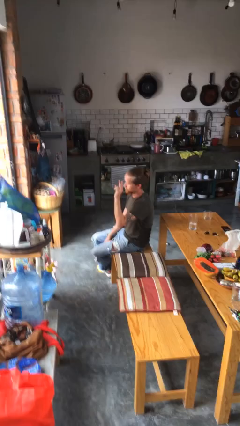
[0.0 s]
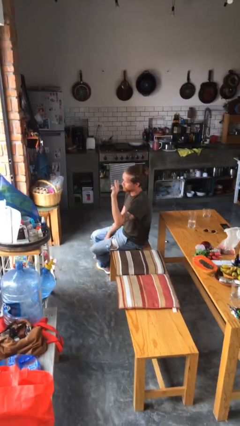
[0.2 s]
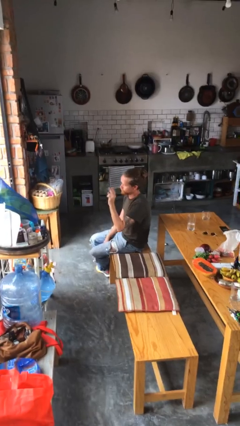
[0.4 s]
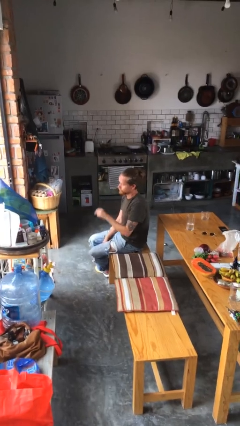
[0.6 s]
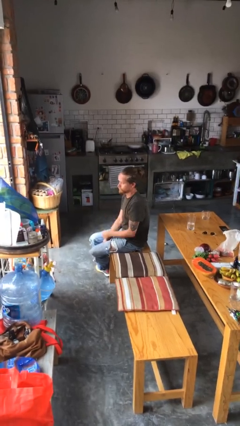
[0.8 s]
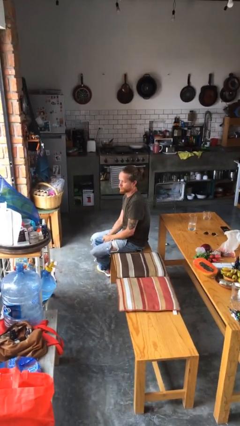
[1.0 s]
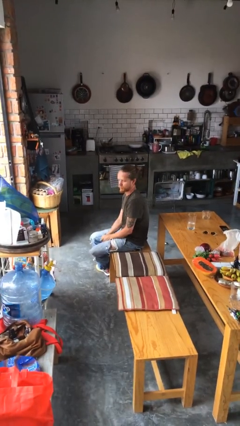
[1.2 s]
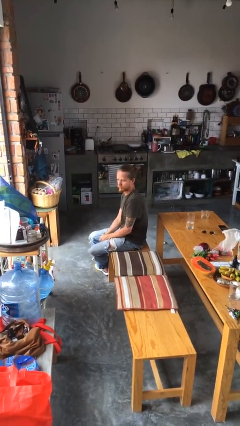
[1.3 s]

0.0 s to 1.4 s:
person gestures lower hand

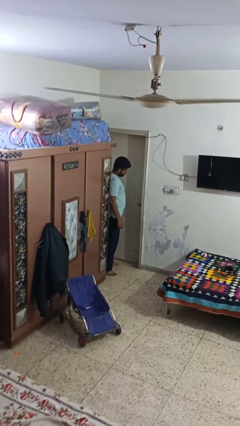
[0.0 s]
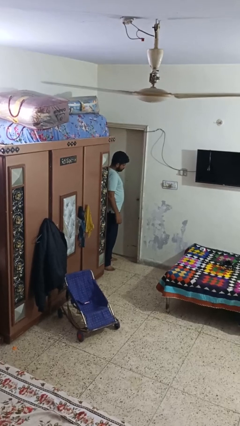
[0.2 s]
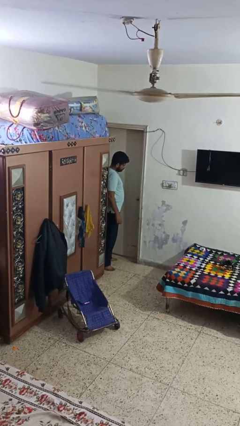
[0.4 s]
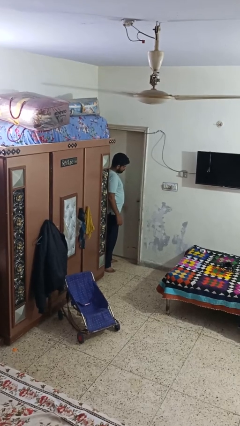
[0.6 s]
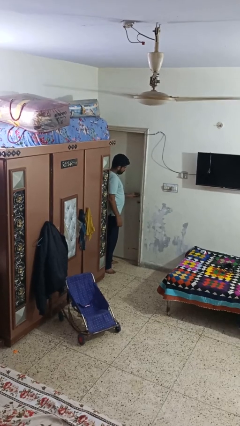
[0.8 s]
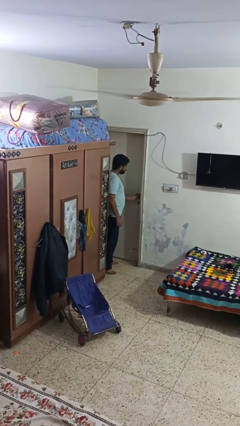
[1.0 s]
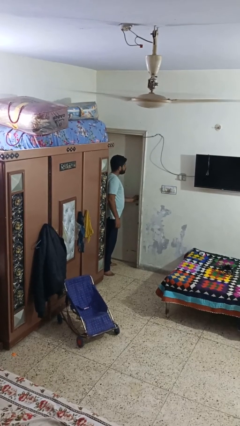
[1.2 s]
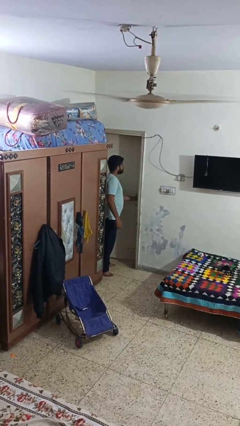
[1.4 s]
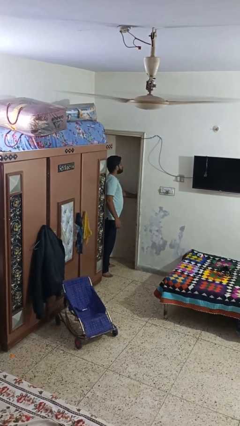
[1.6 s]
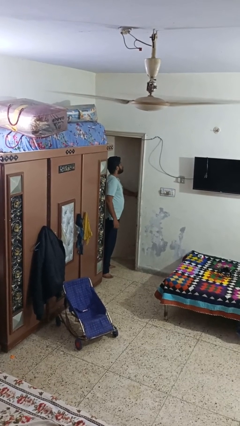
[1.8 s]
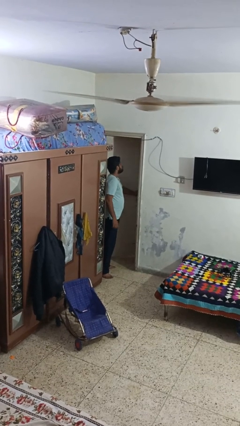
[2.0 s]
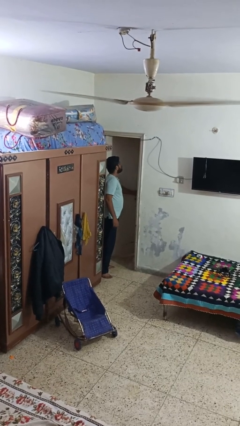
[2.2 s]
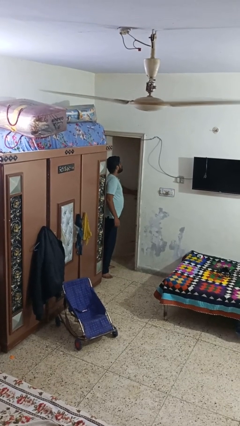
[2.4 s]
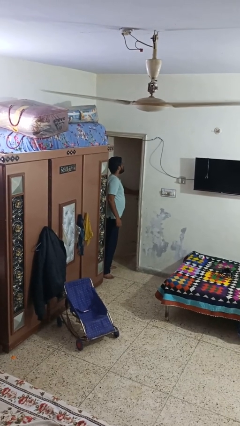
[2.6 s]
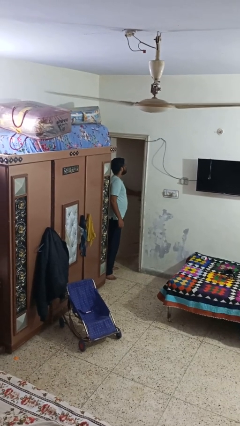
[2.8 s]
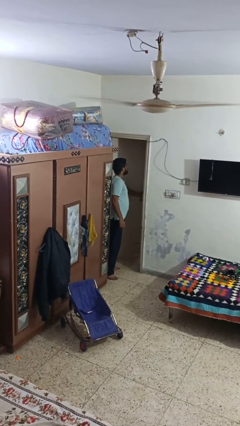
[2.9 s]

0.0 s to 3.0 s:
person opens facility door

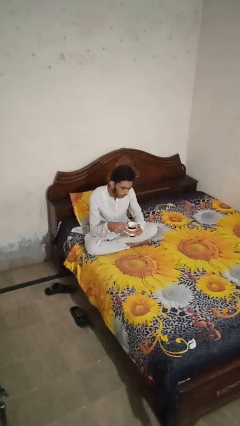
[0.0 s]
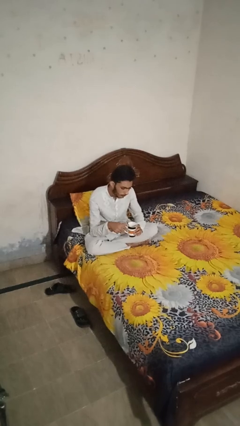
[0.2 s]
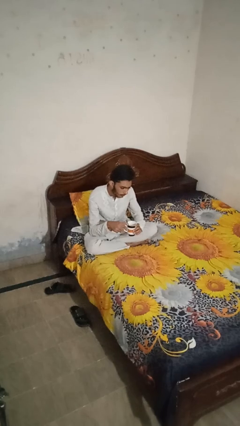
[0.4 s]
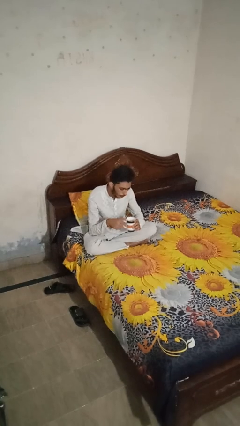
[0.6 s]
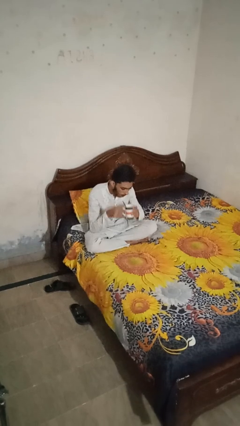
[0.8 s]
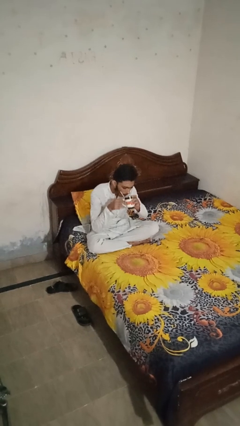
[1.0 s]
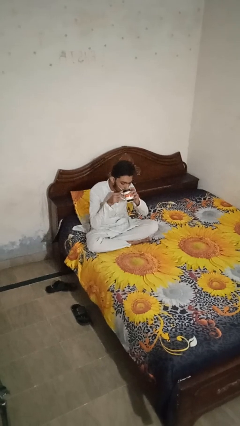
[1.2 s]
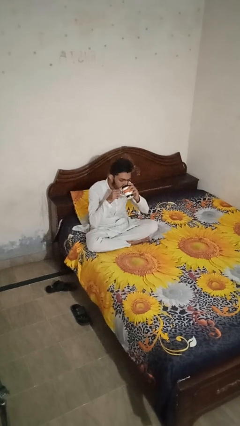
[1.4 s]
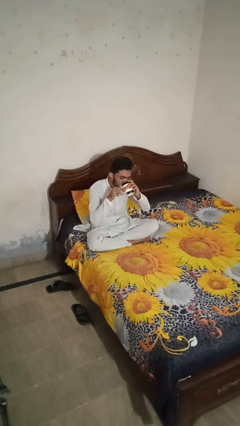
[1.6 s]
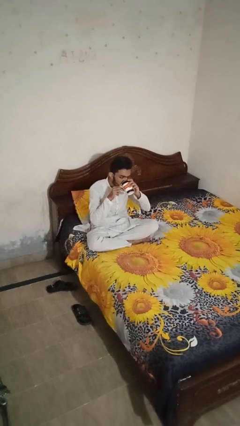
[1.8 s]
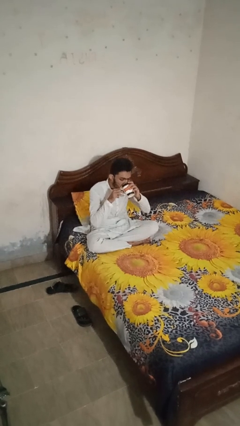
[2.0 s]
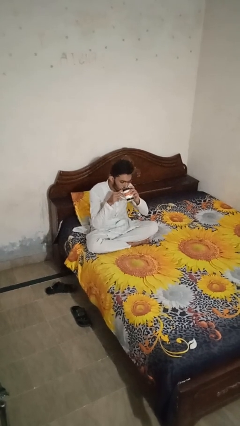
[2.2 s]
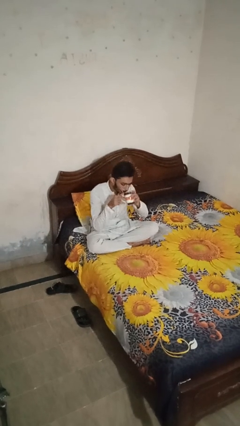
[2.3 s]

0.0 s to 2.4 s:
person drinks from mug

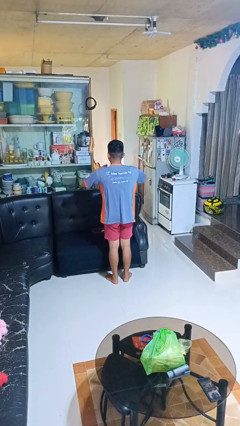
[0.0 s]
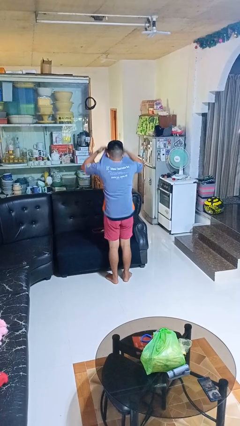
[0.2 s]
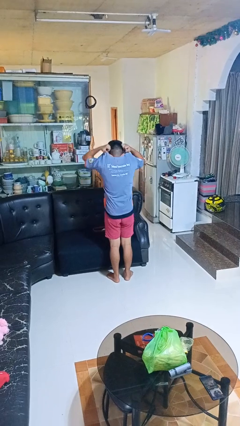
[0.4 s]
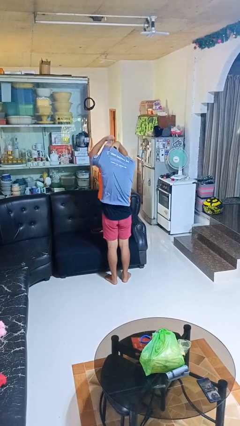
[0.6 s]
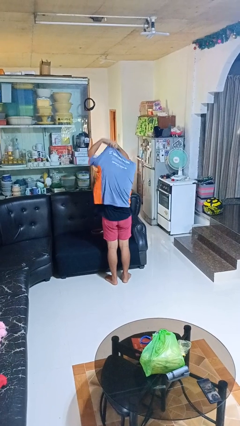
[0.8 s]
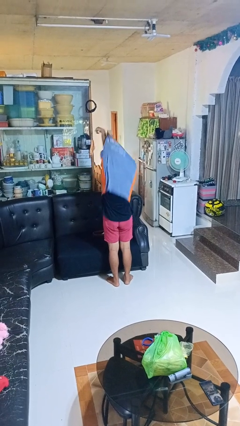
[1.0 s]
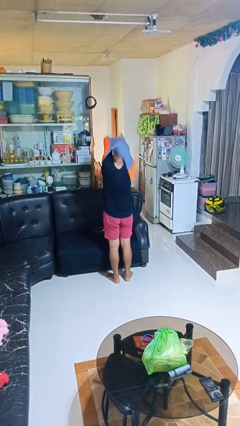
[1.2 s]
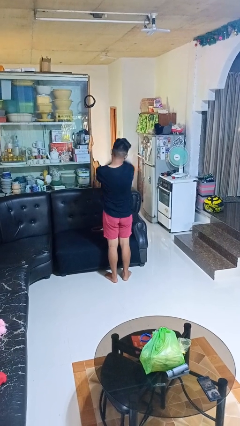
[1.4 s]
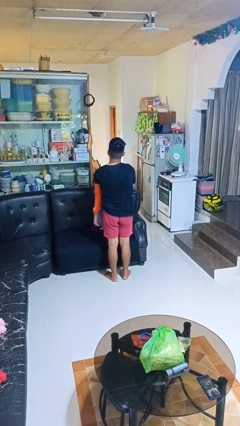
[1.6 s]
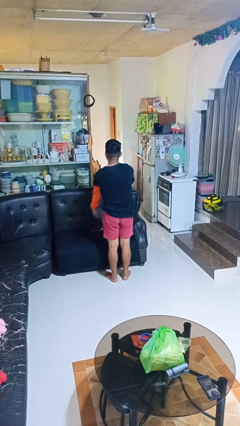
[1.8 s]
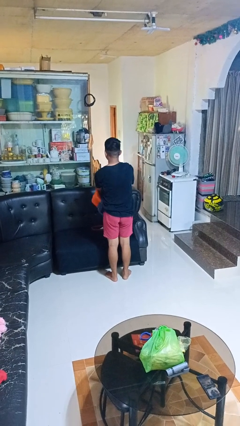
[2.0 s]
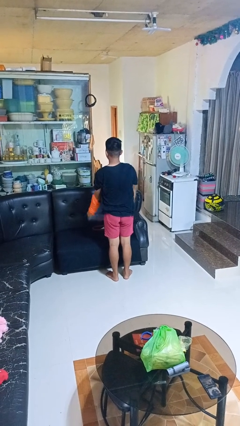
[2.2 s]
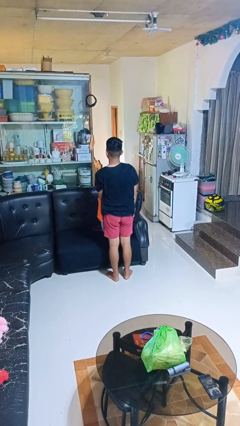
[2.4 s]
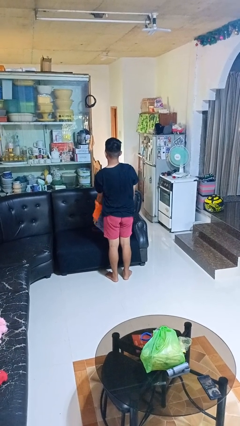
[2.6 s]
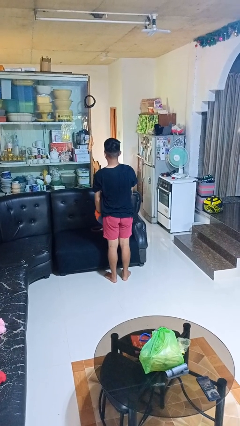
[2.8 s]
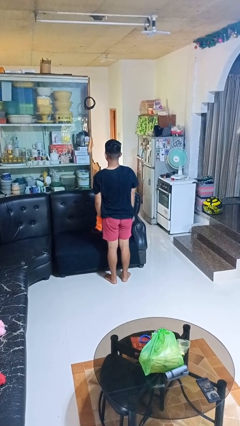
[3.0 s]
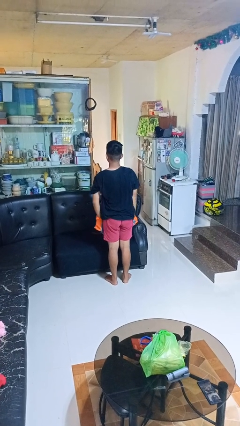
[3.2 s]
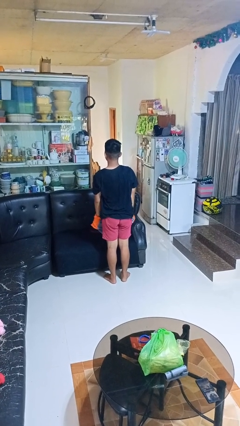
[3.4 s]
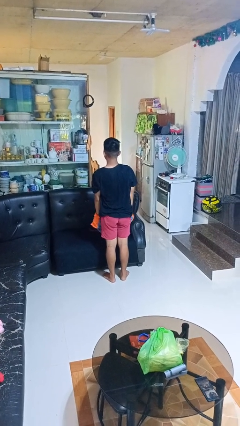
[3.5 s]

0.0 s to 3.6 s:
person takes off shirt

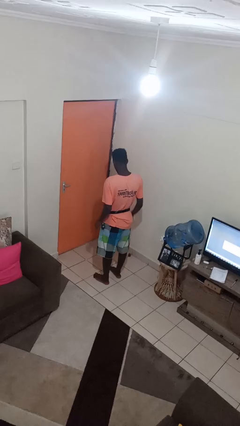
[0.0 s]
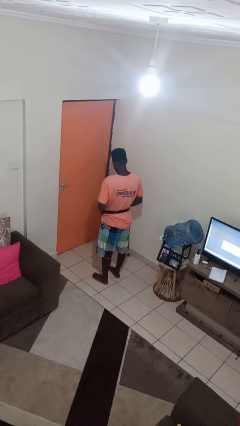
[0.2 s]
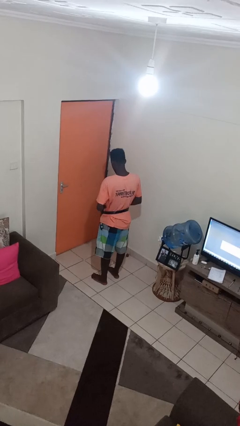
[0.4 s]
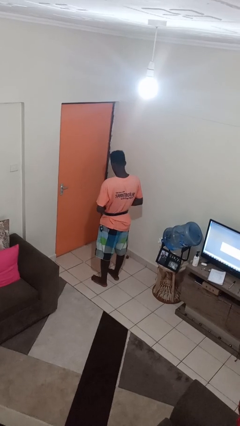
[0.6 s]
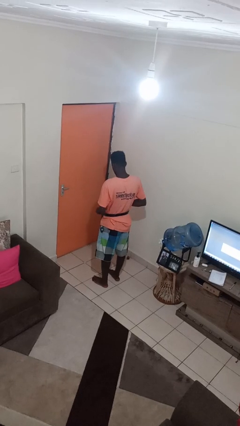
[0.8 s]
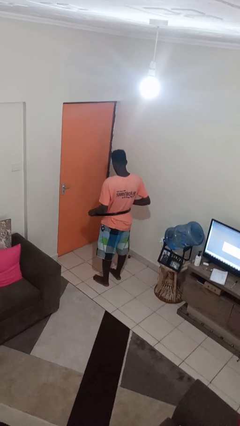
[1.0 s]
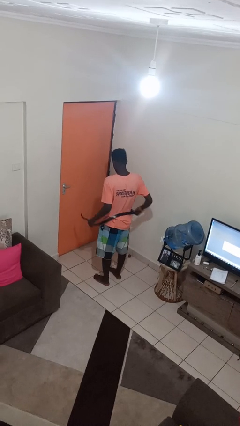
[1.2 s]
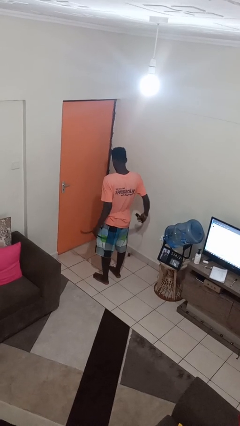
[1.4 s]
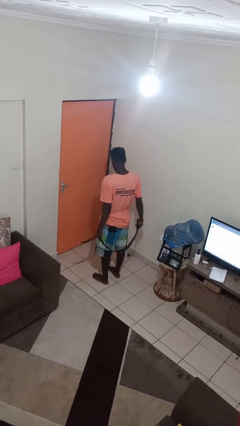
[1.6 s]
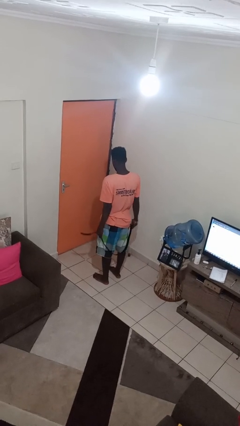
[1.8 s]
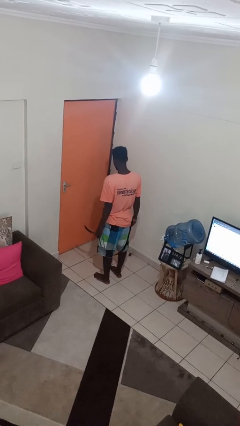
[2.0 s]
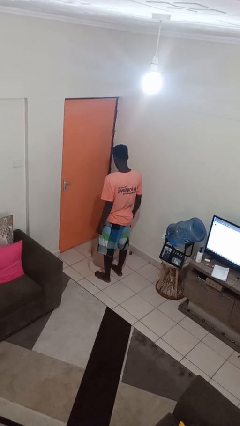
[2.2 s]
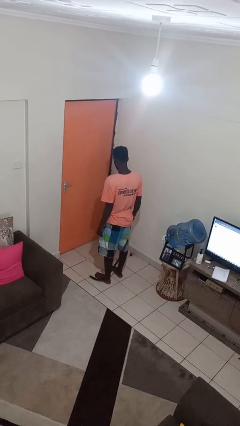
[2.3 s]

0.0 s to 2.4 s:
person takes off belt

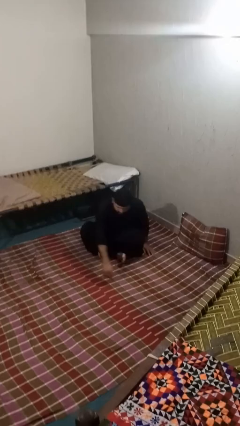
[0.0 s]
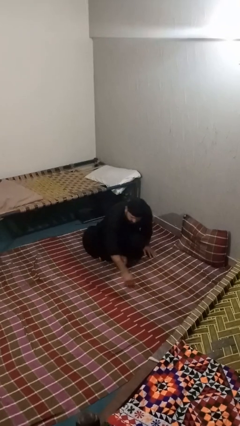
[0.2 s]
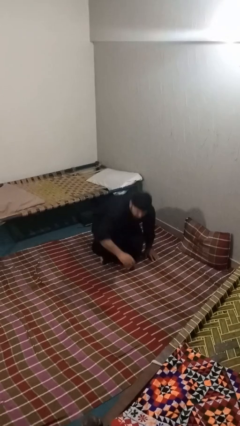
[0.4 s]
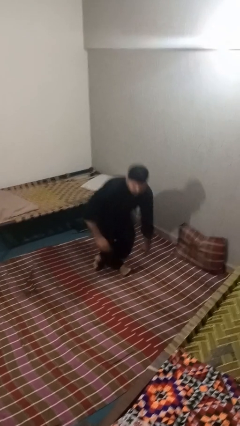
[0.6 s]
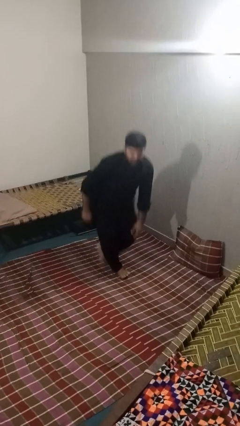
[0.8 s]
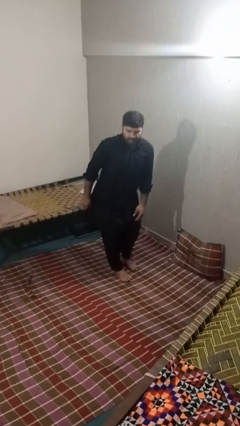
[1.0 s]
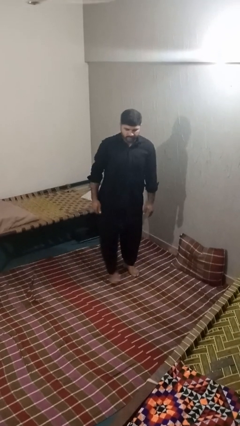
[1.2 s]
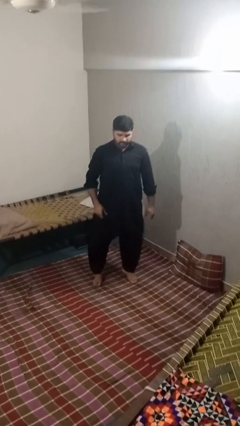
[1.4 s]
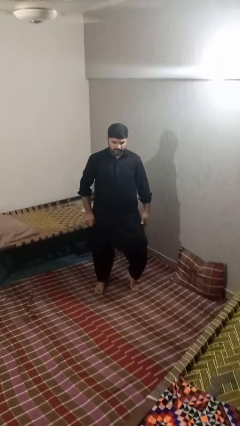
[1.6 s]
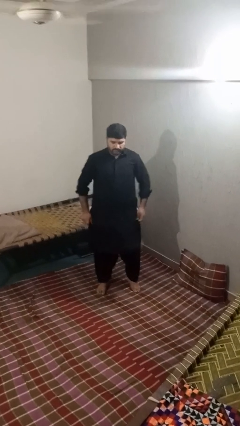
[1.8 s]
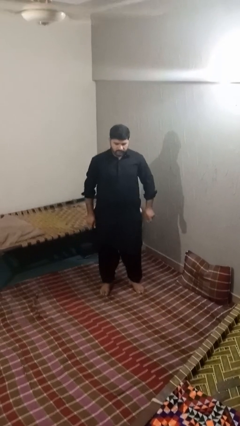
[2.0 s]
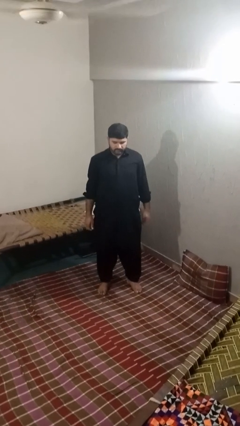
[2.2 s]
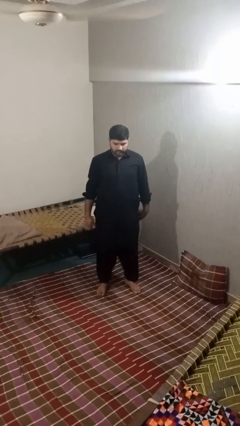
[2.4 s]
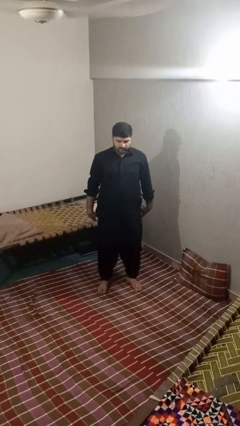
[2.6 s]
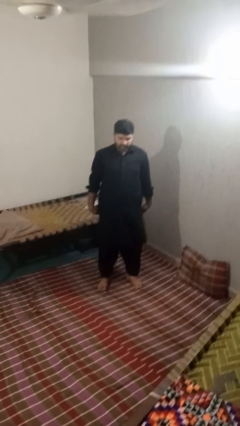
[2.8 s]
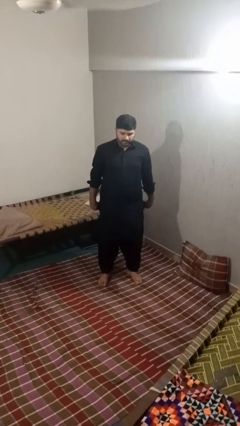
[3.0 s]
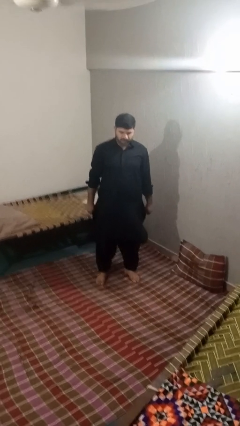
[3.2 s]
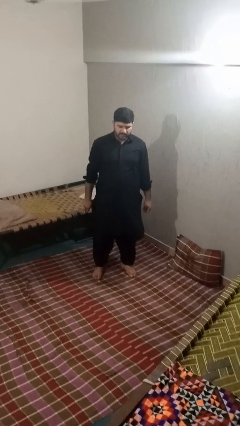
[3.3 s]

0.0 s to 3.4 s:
person stands up from floor

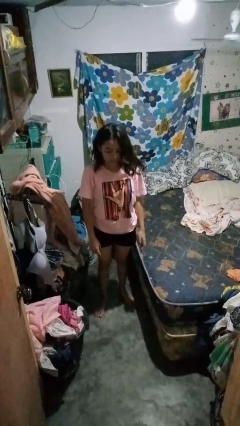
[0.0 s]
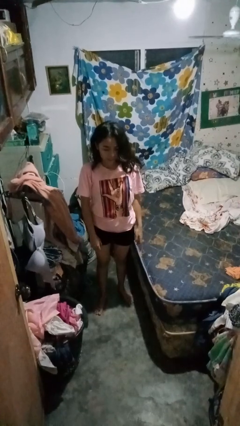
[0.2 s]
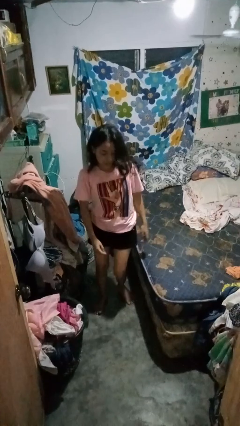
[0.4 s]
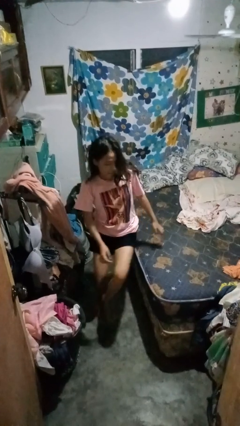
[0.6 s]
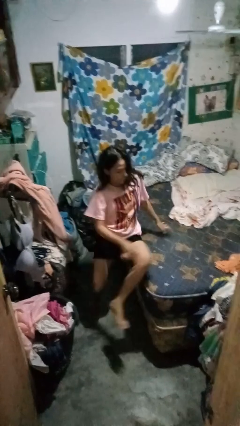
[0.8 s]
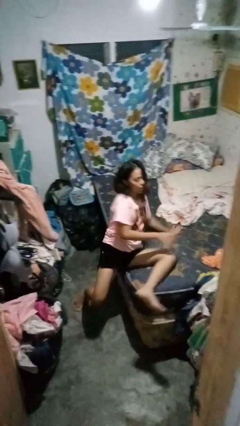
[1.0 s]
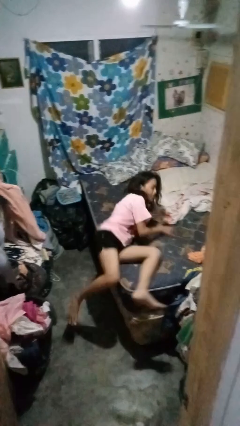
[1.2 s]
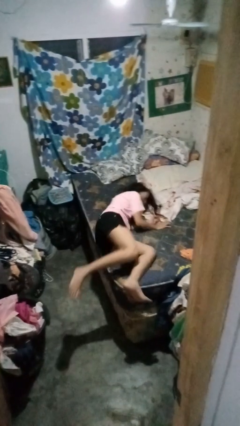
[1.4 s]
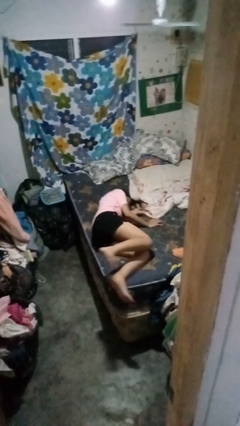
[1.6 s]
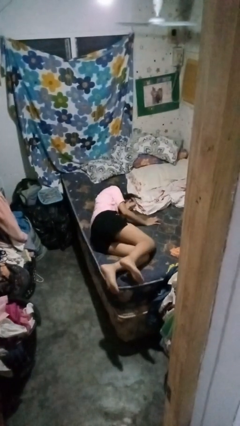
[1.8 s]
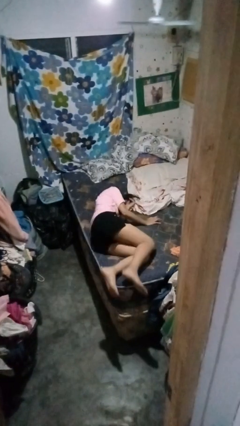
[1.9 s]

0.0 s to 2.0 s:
person lies down on bed
